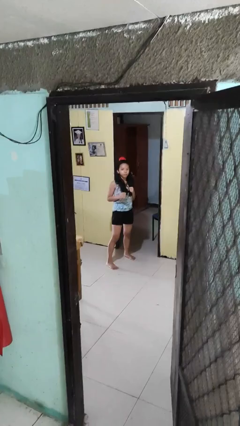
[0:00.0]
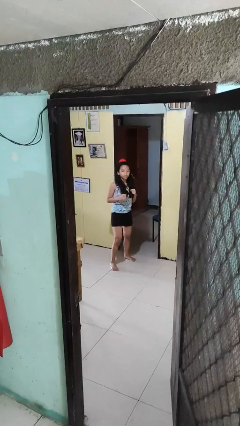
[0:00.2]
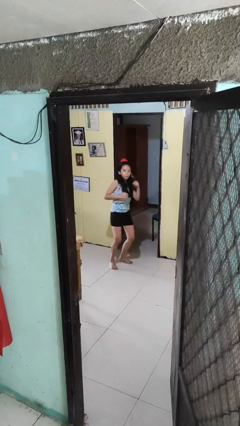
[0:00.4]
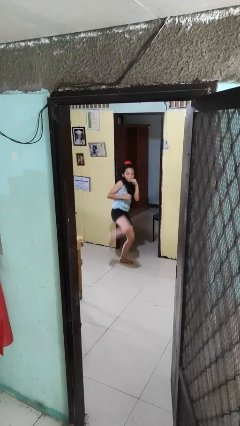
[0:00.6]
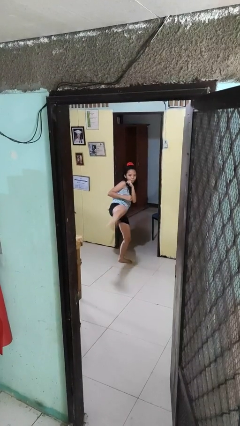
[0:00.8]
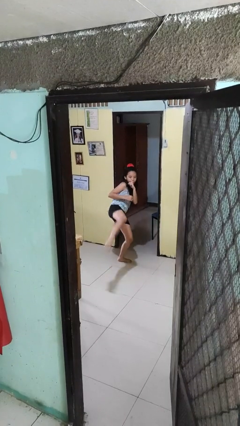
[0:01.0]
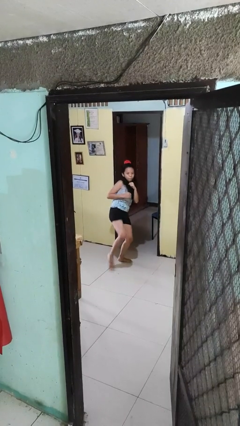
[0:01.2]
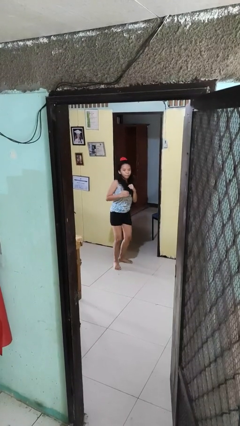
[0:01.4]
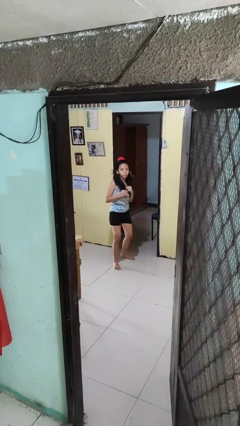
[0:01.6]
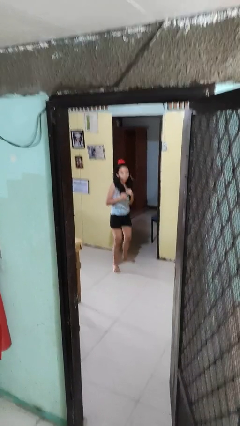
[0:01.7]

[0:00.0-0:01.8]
person karate kicks

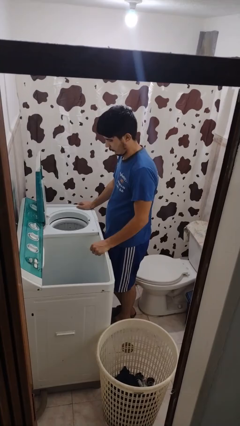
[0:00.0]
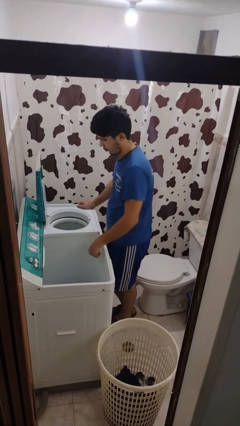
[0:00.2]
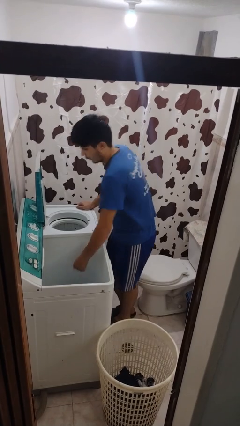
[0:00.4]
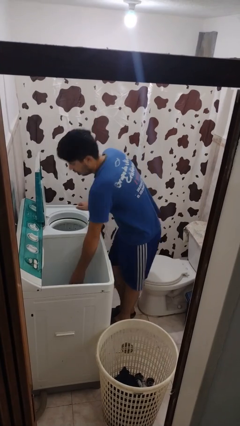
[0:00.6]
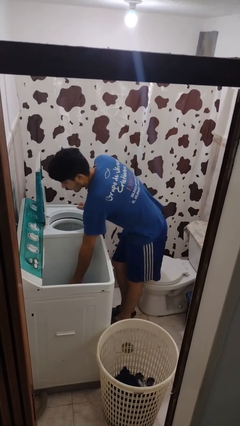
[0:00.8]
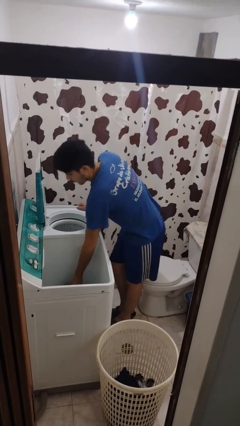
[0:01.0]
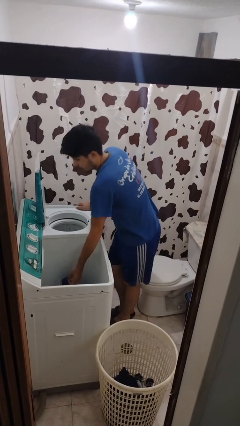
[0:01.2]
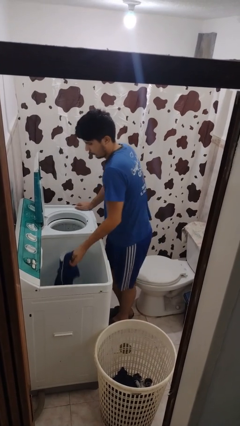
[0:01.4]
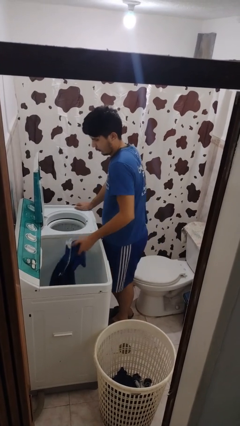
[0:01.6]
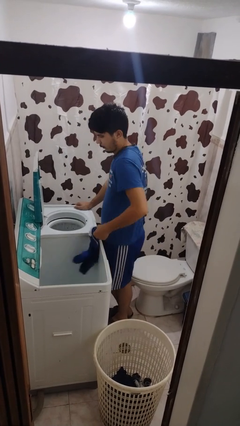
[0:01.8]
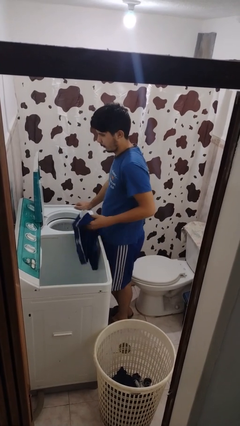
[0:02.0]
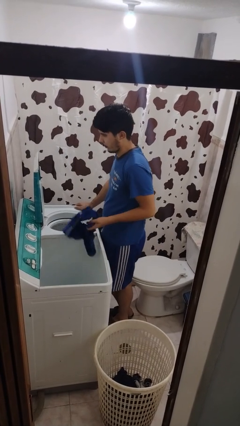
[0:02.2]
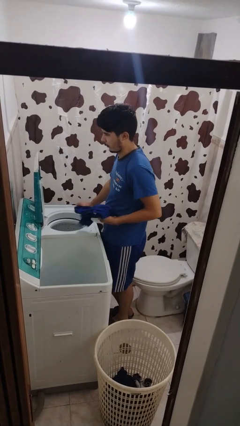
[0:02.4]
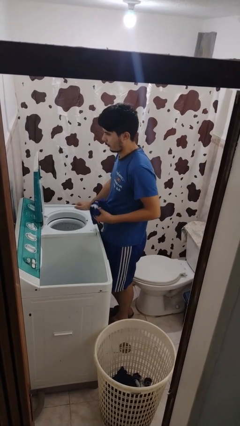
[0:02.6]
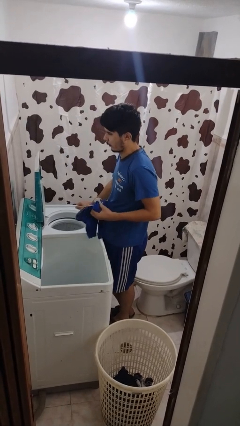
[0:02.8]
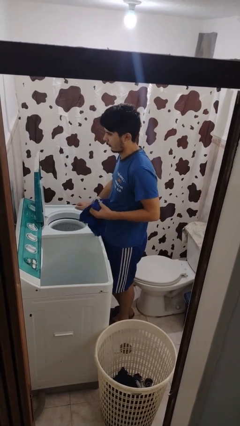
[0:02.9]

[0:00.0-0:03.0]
person unloads clotheswasher

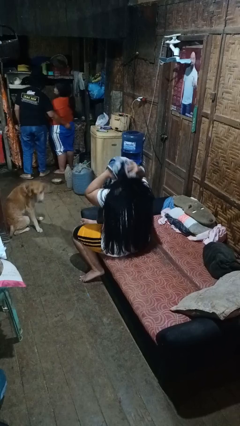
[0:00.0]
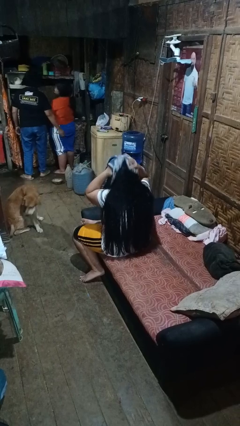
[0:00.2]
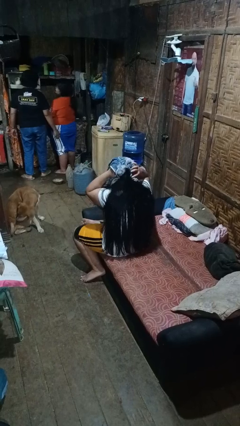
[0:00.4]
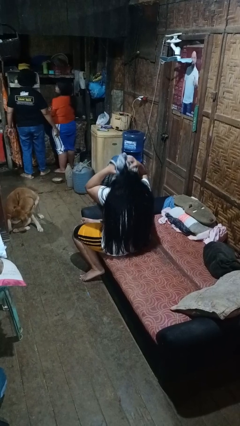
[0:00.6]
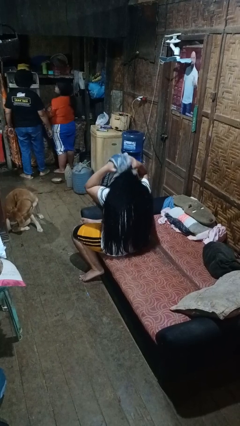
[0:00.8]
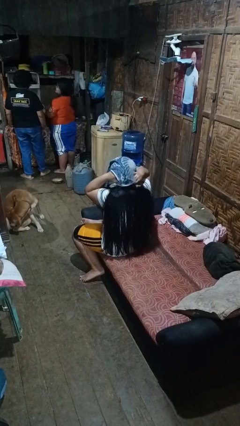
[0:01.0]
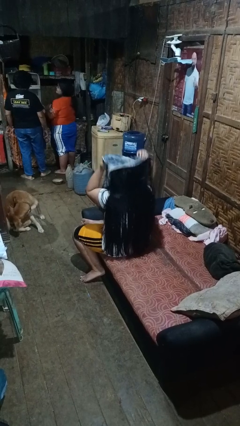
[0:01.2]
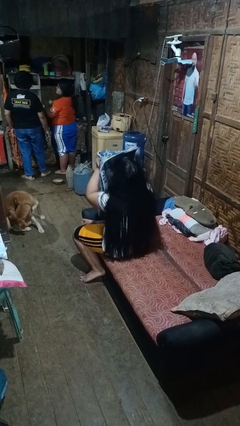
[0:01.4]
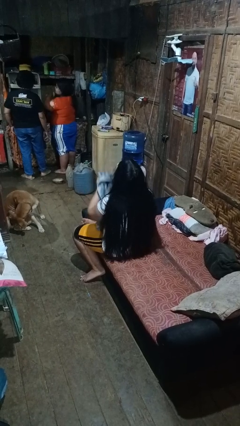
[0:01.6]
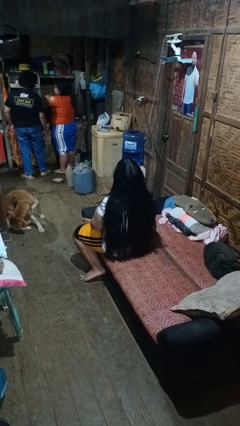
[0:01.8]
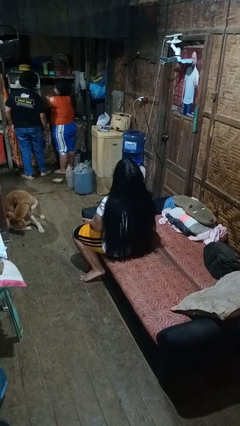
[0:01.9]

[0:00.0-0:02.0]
person dries hair with towel

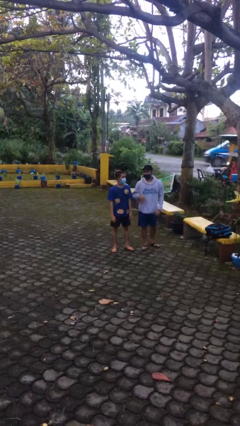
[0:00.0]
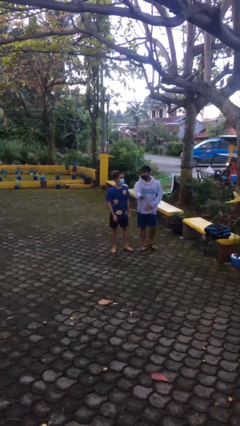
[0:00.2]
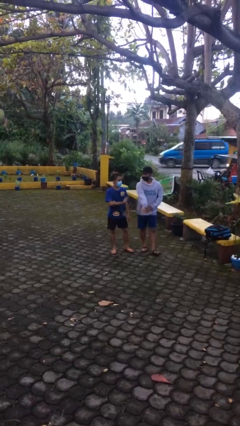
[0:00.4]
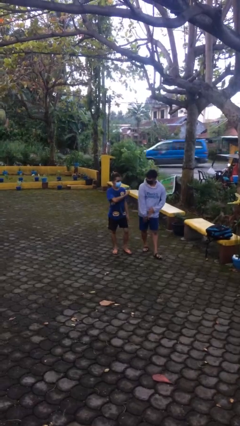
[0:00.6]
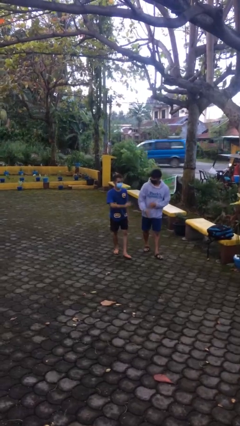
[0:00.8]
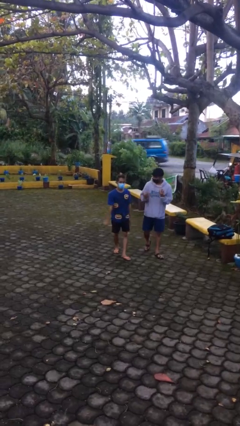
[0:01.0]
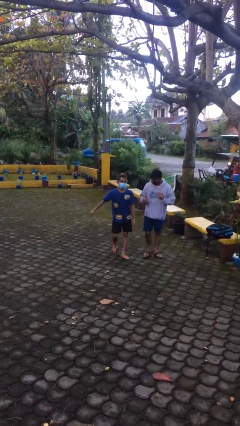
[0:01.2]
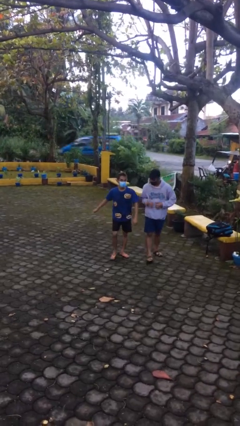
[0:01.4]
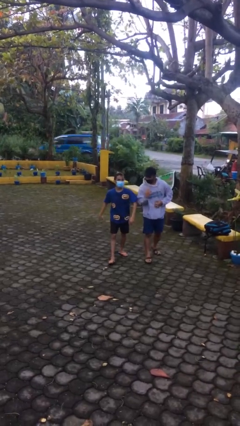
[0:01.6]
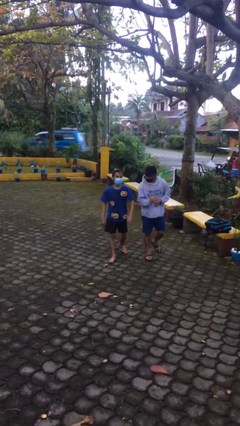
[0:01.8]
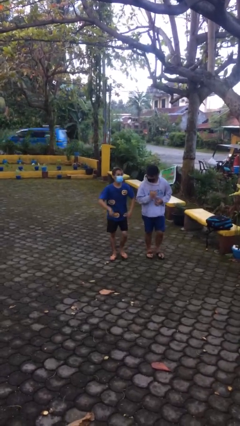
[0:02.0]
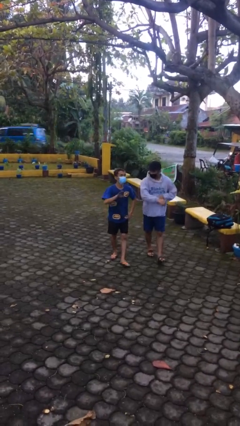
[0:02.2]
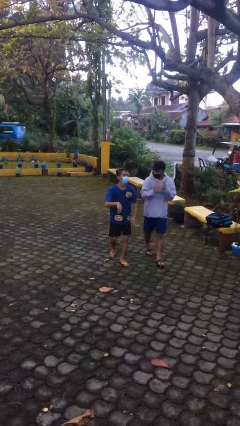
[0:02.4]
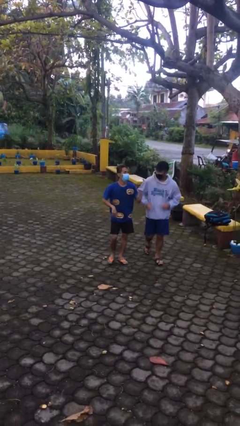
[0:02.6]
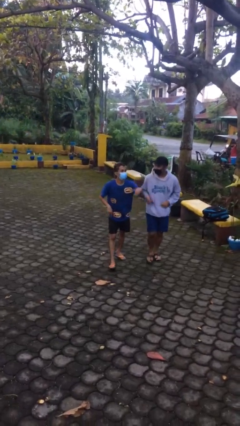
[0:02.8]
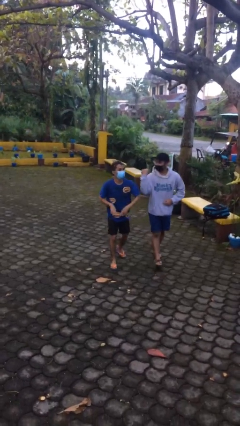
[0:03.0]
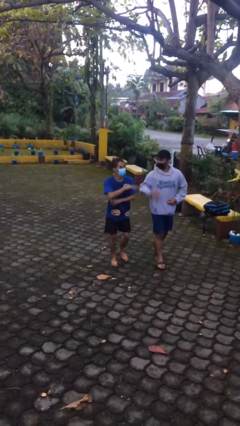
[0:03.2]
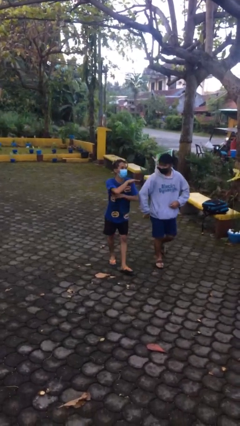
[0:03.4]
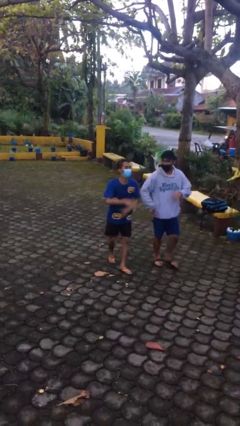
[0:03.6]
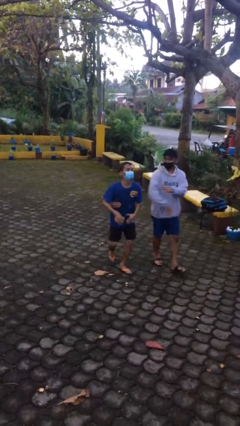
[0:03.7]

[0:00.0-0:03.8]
person talks to person

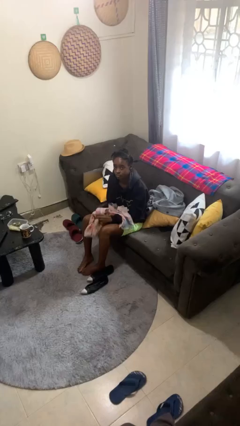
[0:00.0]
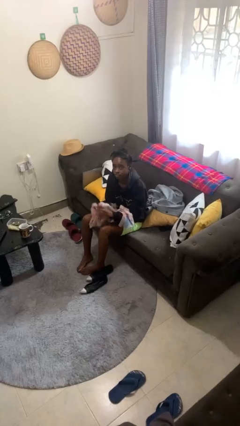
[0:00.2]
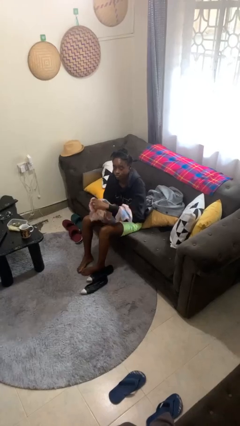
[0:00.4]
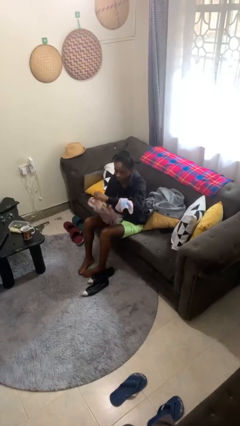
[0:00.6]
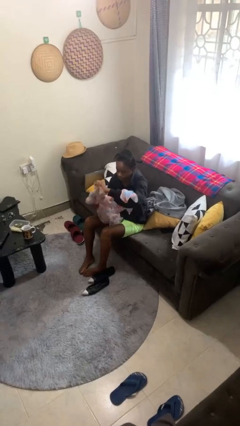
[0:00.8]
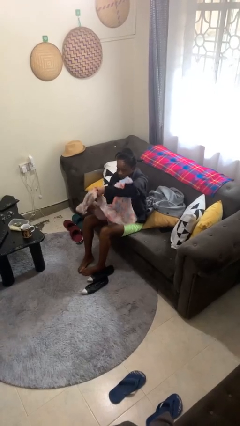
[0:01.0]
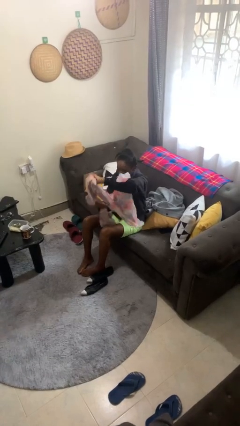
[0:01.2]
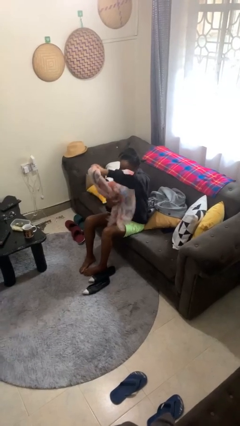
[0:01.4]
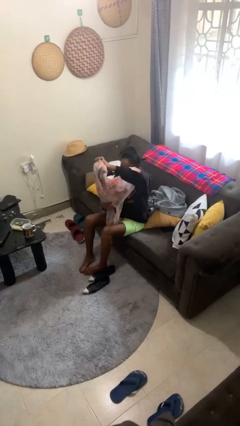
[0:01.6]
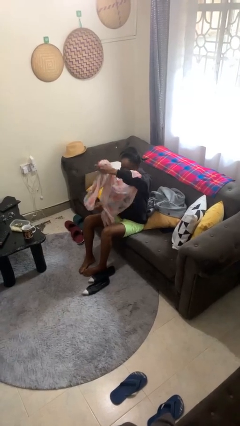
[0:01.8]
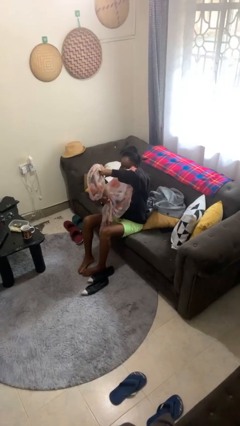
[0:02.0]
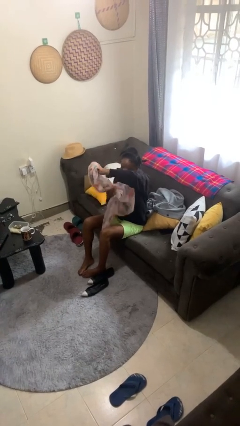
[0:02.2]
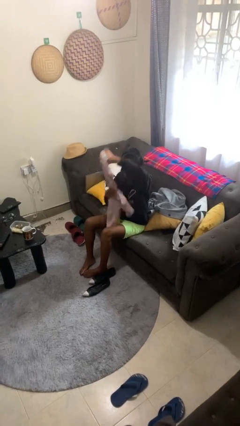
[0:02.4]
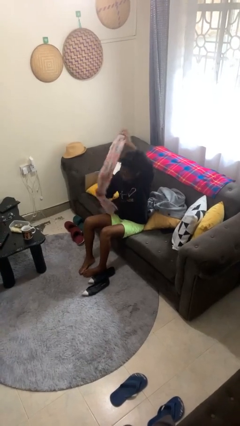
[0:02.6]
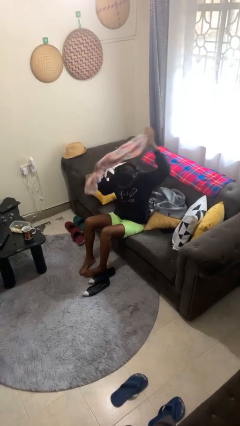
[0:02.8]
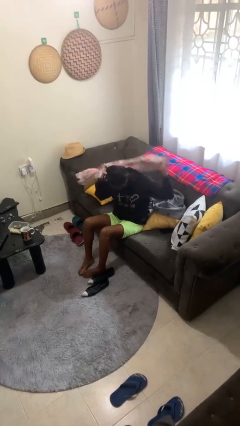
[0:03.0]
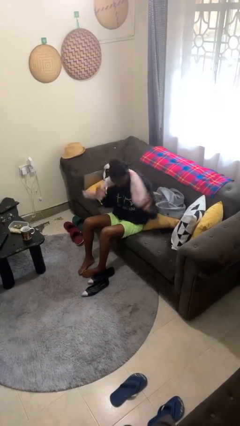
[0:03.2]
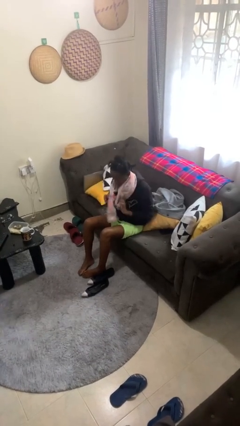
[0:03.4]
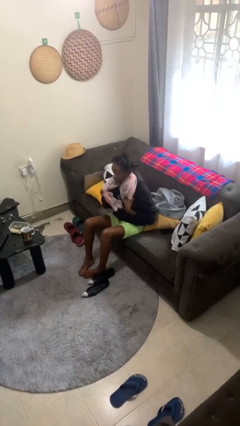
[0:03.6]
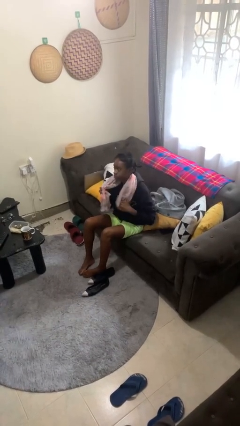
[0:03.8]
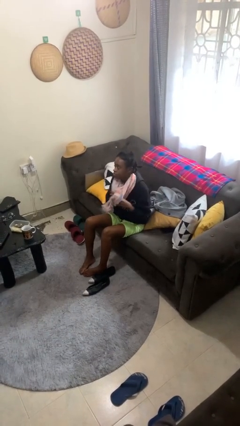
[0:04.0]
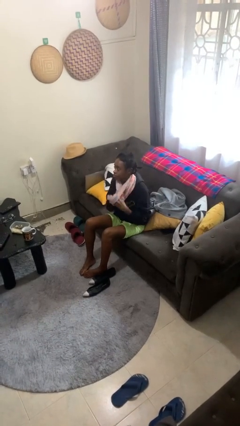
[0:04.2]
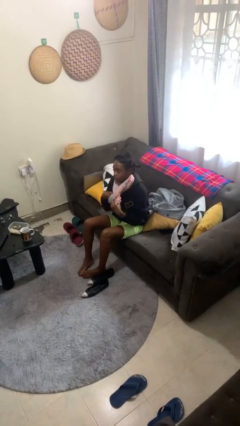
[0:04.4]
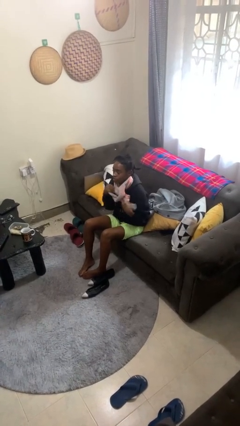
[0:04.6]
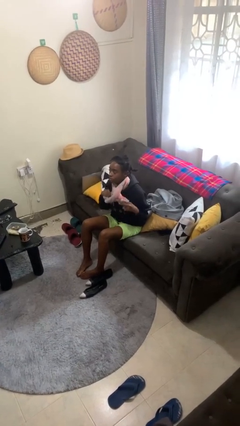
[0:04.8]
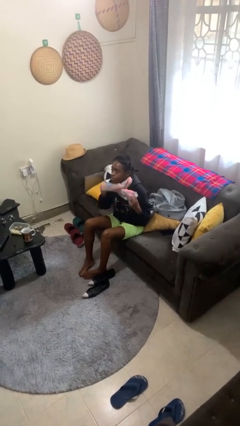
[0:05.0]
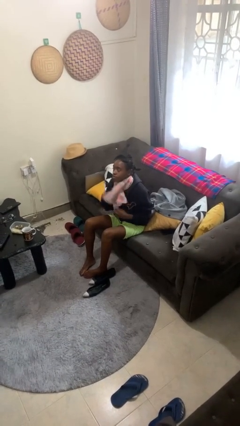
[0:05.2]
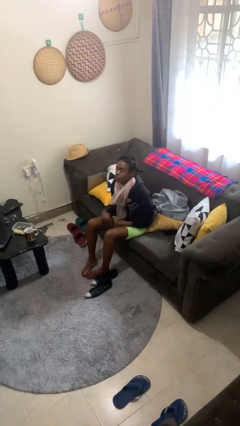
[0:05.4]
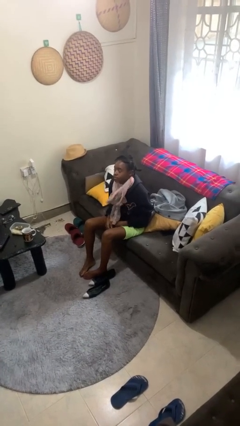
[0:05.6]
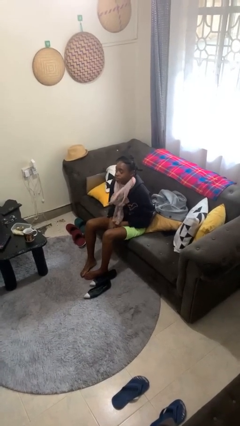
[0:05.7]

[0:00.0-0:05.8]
person puts on scarf

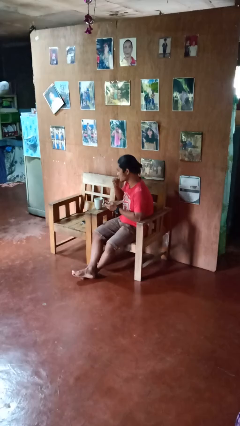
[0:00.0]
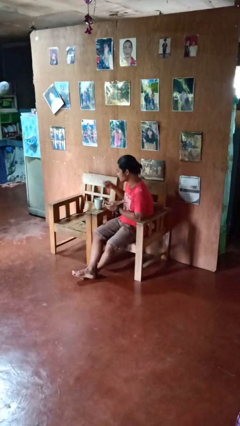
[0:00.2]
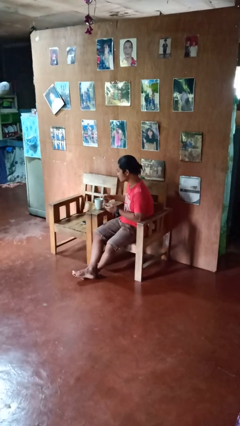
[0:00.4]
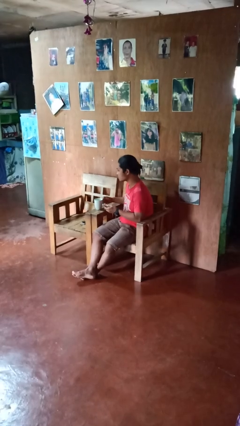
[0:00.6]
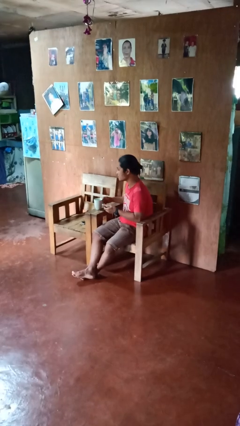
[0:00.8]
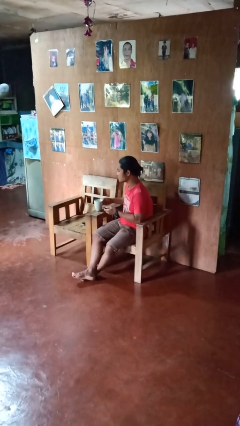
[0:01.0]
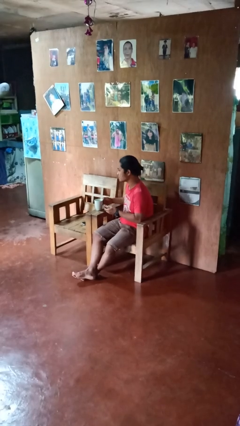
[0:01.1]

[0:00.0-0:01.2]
person takes medicine pills
